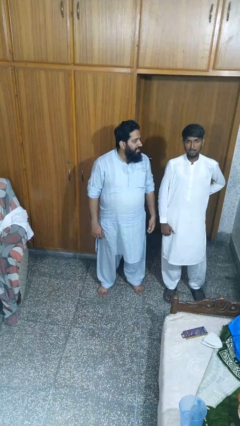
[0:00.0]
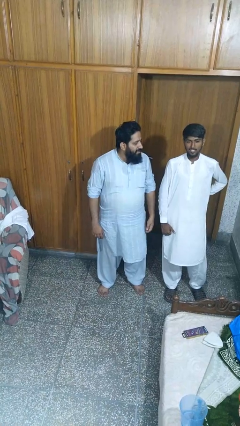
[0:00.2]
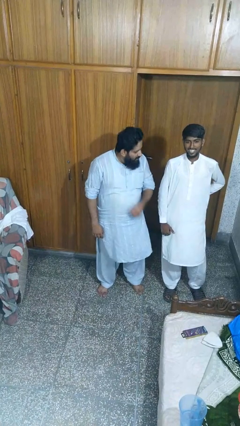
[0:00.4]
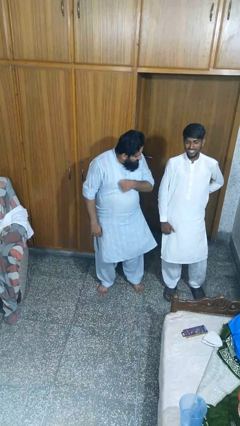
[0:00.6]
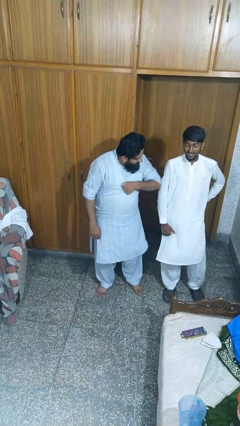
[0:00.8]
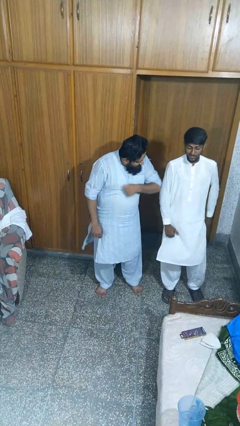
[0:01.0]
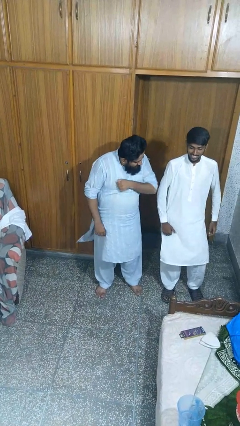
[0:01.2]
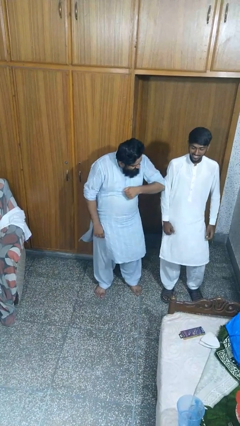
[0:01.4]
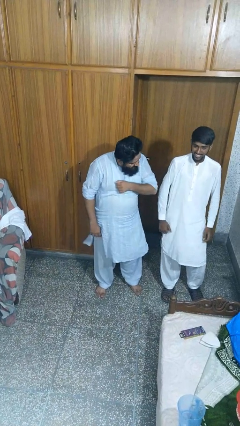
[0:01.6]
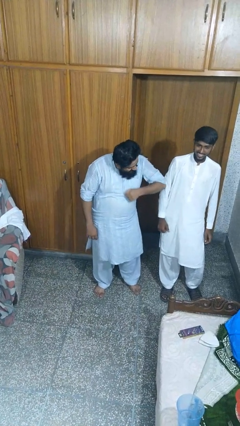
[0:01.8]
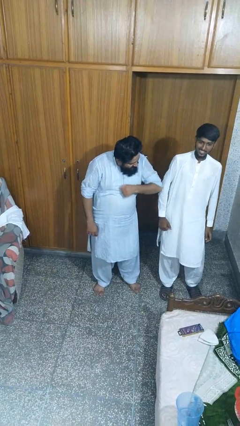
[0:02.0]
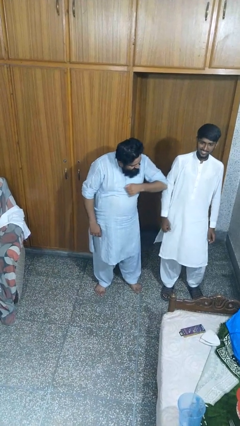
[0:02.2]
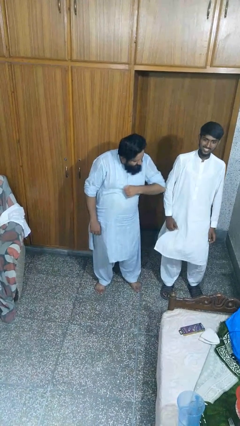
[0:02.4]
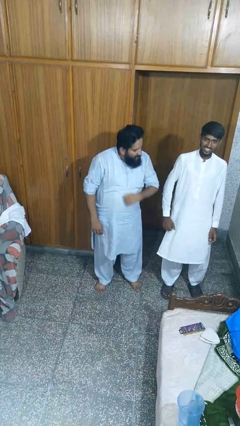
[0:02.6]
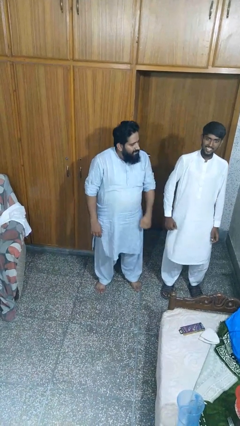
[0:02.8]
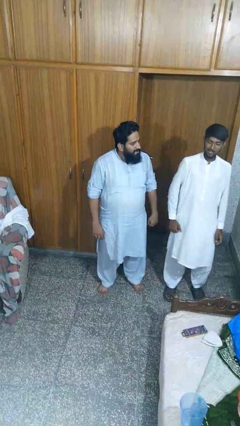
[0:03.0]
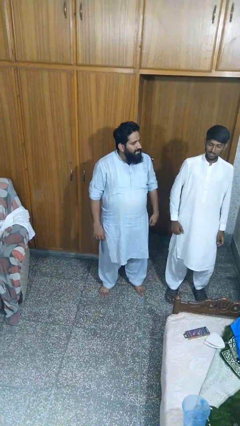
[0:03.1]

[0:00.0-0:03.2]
person nudges person with elbow

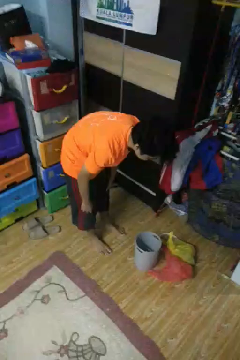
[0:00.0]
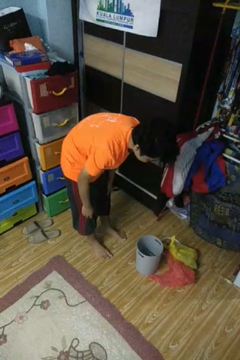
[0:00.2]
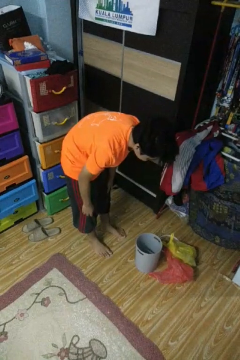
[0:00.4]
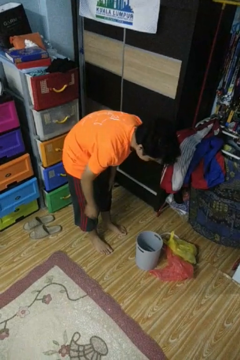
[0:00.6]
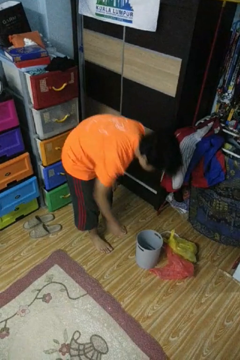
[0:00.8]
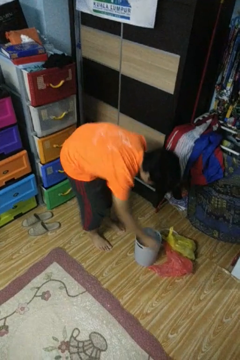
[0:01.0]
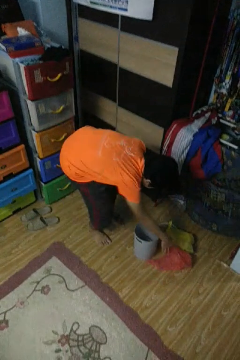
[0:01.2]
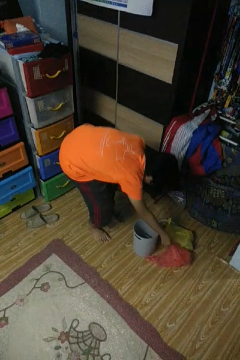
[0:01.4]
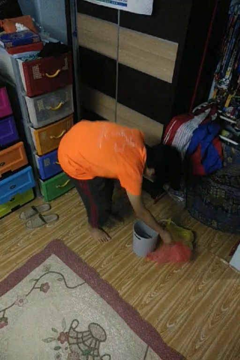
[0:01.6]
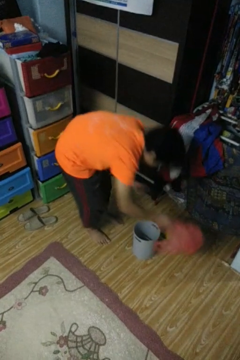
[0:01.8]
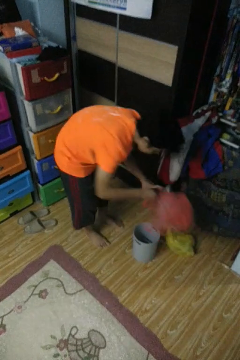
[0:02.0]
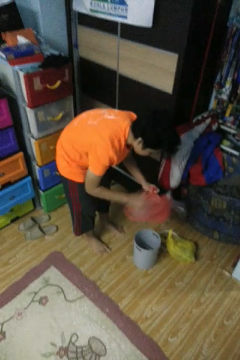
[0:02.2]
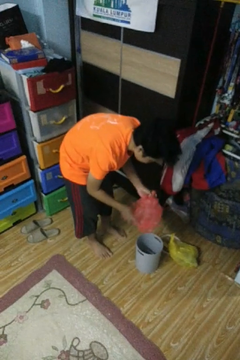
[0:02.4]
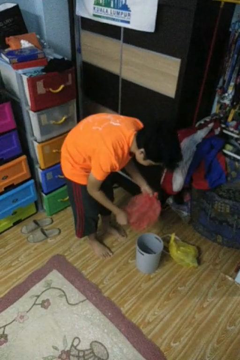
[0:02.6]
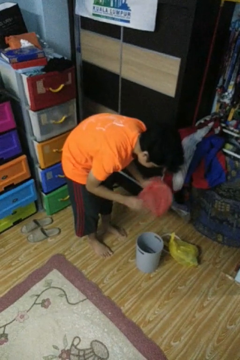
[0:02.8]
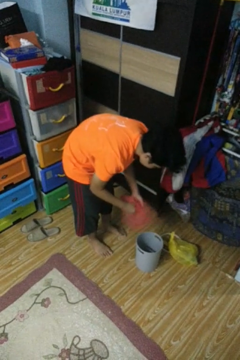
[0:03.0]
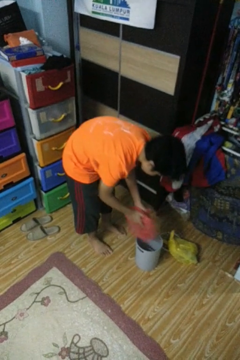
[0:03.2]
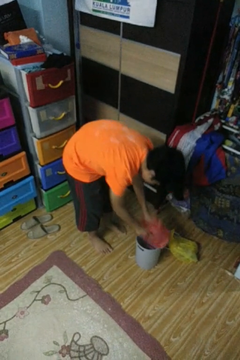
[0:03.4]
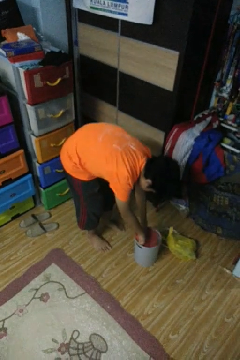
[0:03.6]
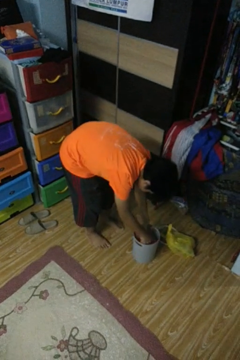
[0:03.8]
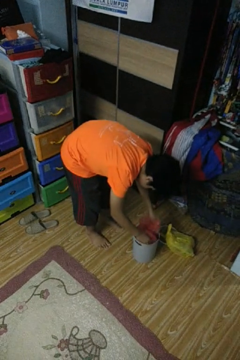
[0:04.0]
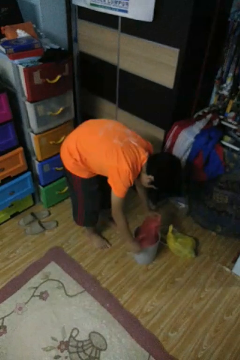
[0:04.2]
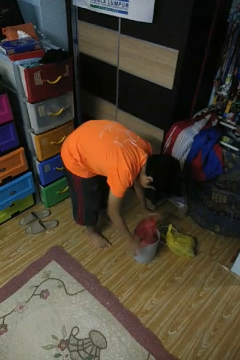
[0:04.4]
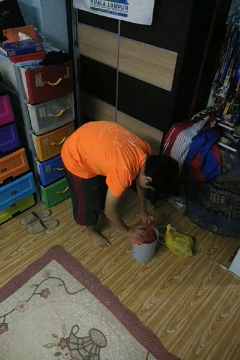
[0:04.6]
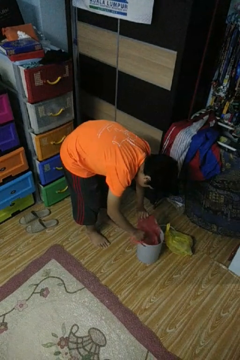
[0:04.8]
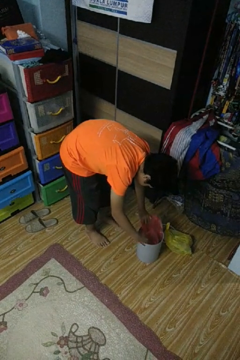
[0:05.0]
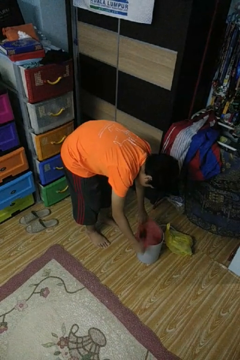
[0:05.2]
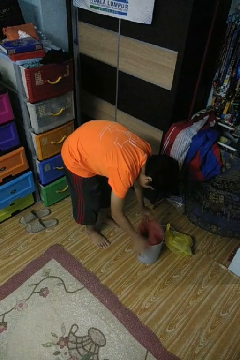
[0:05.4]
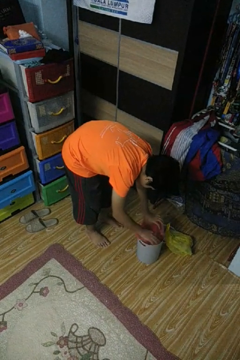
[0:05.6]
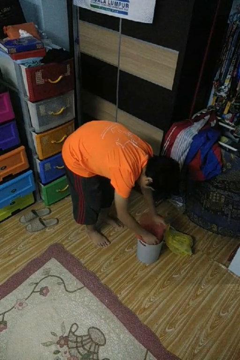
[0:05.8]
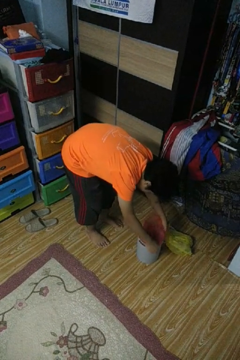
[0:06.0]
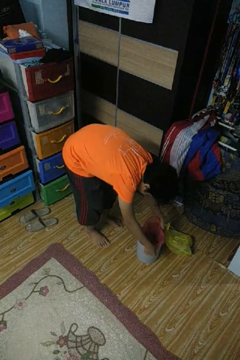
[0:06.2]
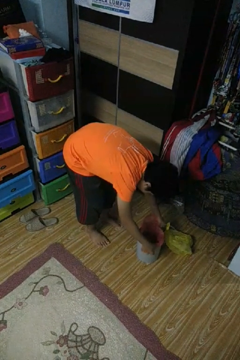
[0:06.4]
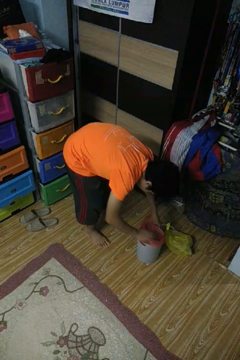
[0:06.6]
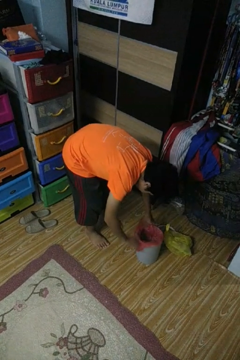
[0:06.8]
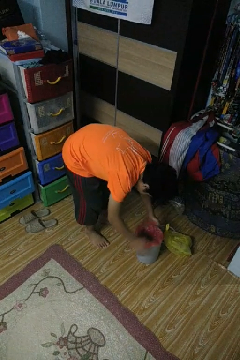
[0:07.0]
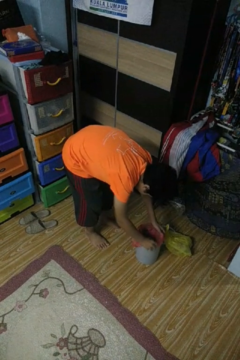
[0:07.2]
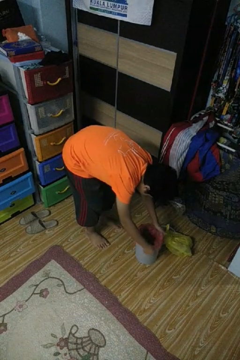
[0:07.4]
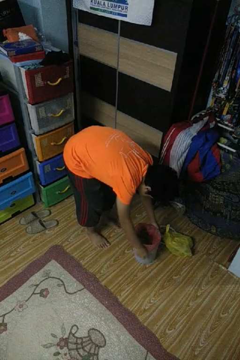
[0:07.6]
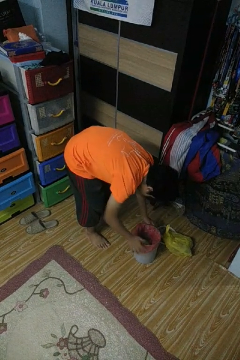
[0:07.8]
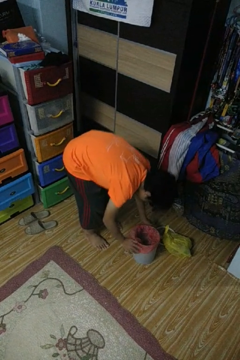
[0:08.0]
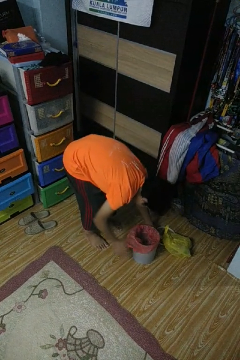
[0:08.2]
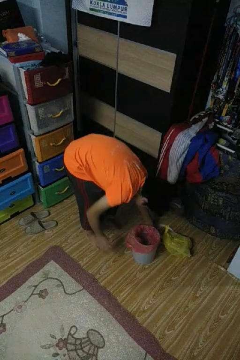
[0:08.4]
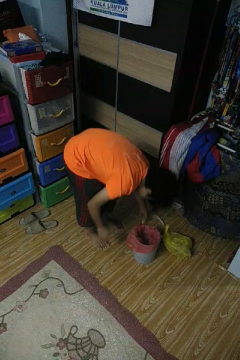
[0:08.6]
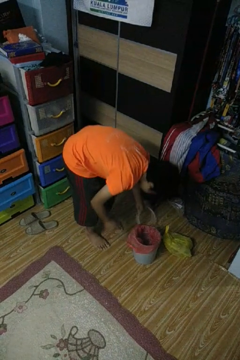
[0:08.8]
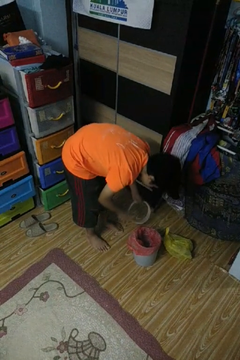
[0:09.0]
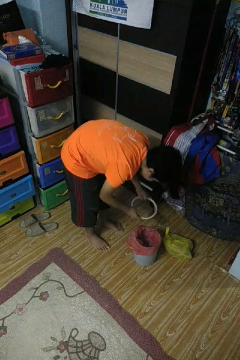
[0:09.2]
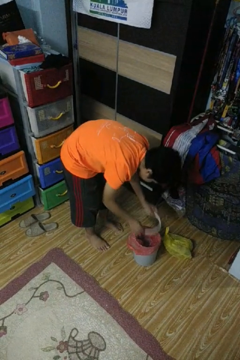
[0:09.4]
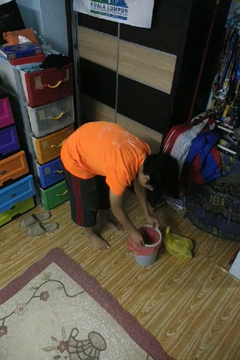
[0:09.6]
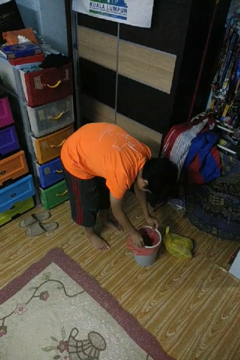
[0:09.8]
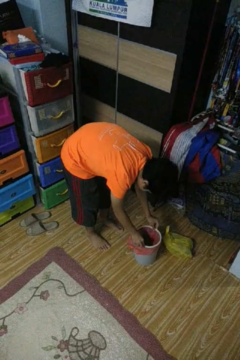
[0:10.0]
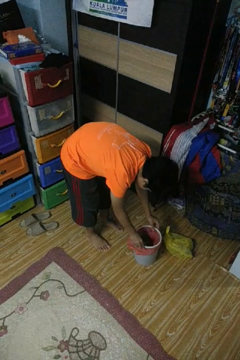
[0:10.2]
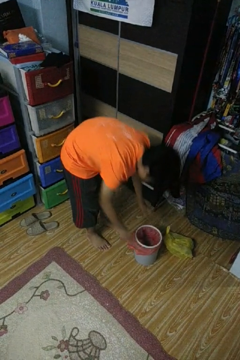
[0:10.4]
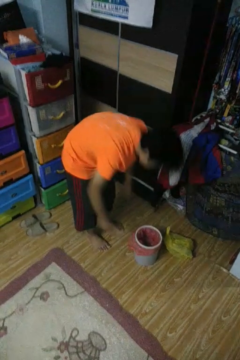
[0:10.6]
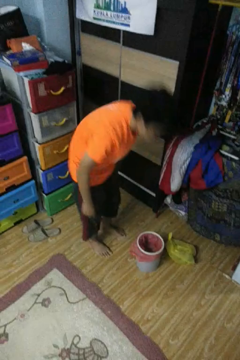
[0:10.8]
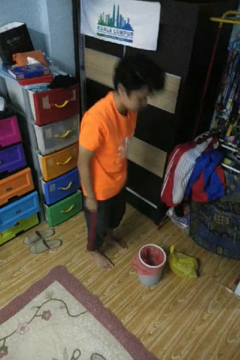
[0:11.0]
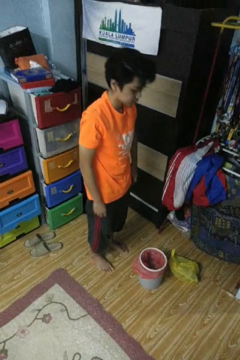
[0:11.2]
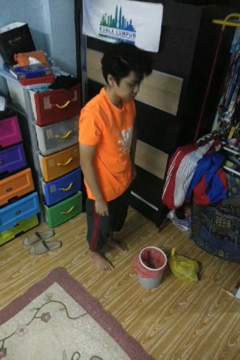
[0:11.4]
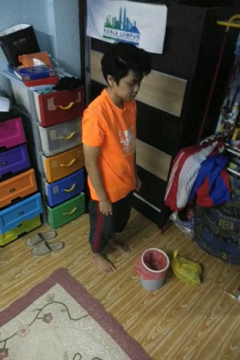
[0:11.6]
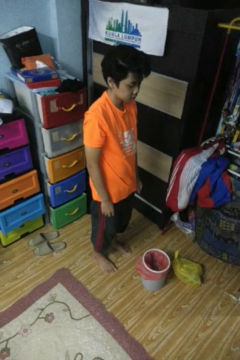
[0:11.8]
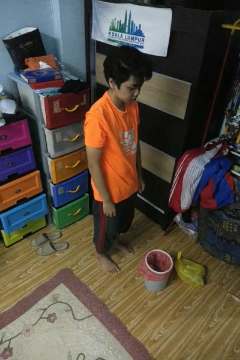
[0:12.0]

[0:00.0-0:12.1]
person inserts trashbag into trashcan

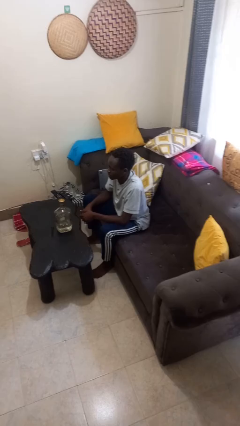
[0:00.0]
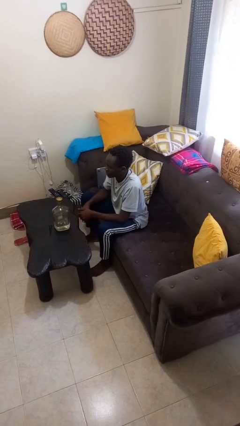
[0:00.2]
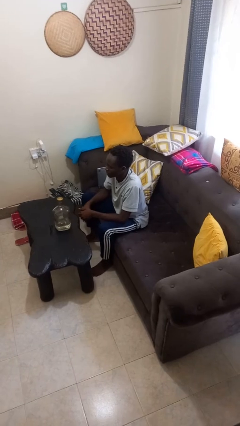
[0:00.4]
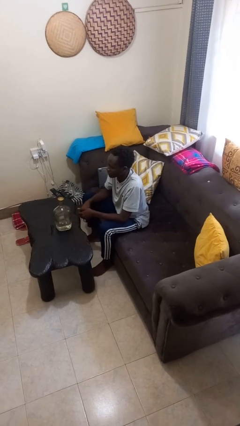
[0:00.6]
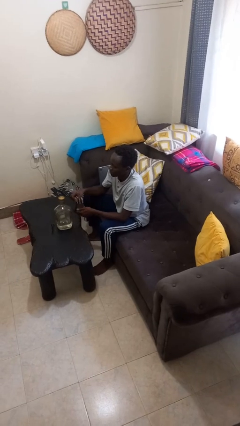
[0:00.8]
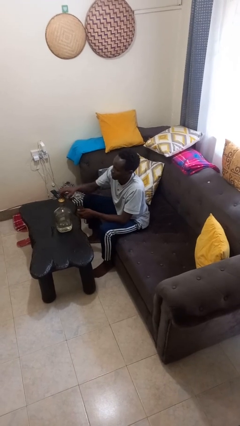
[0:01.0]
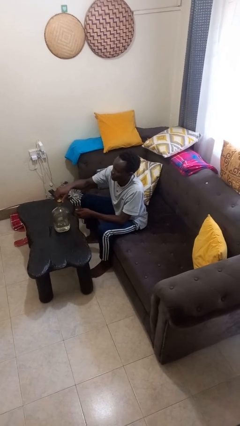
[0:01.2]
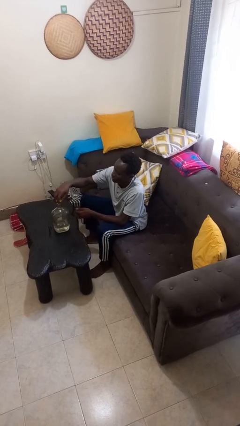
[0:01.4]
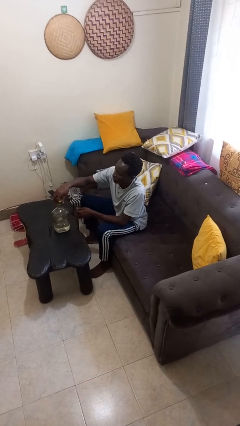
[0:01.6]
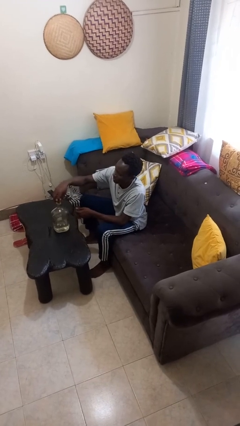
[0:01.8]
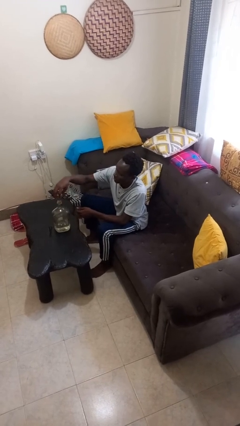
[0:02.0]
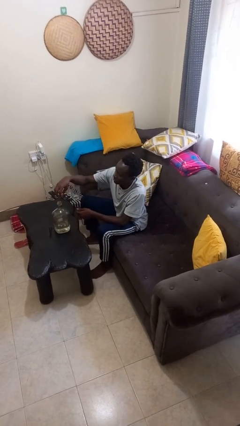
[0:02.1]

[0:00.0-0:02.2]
person unscrews lid from bottle

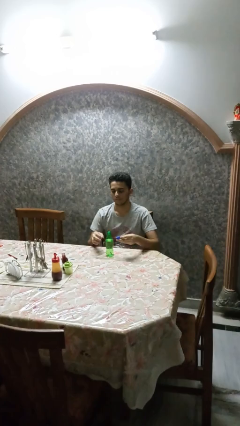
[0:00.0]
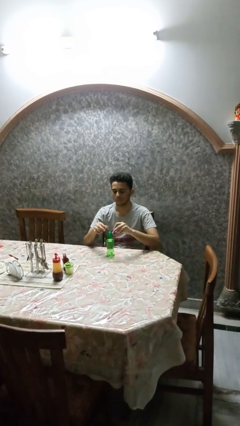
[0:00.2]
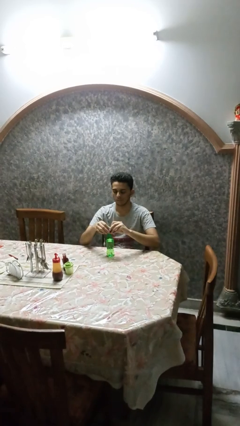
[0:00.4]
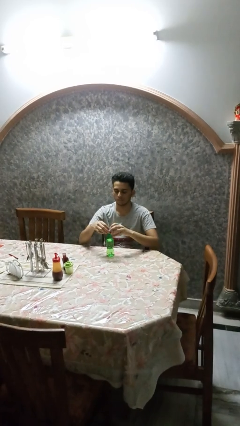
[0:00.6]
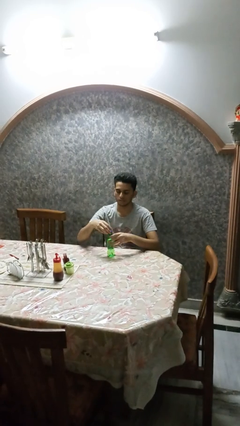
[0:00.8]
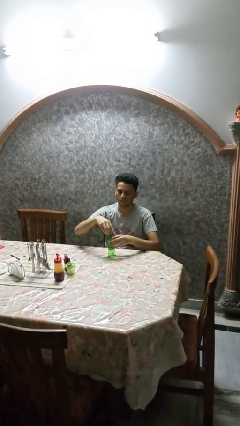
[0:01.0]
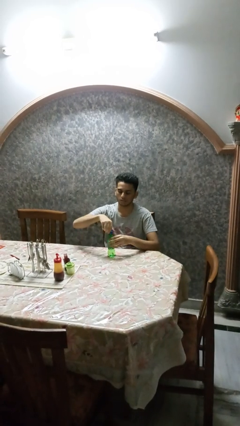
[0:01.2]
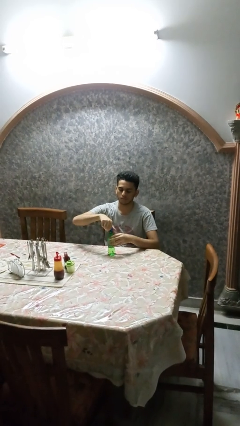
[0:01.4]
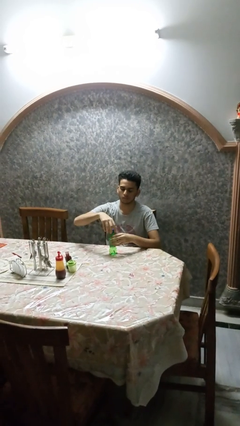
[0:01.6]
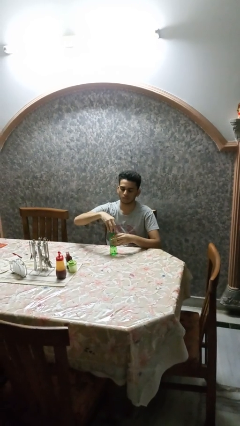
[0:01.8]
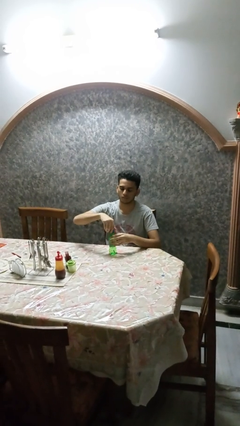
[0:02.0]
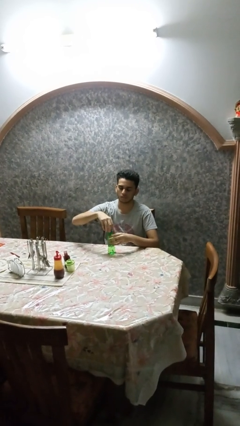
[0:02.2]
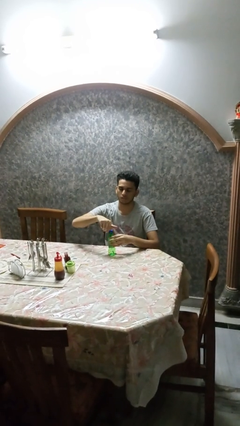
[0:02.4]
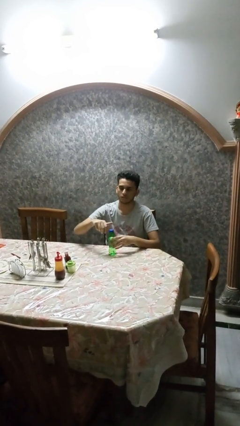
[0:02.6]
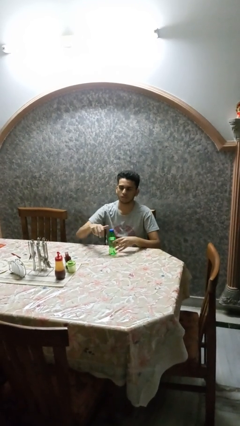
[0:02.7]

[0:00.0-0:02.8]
person screws lid to bottle
